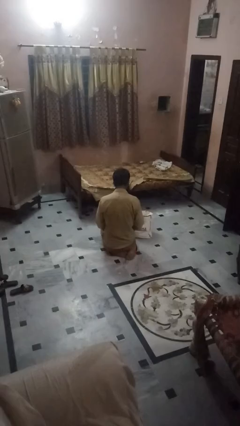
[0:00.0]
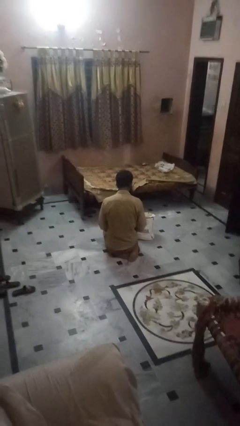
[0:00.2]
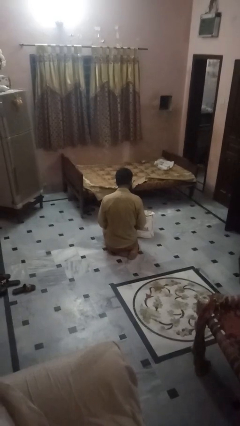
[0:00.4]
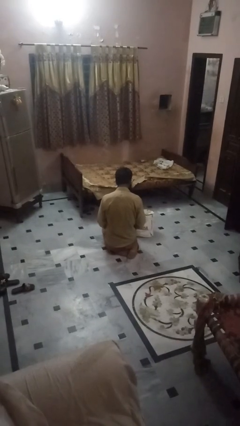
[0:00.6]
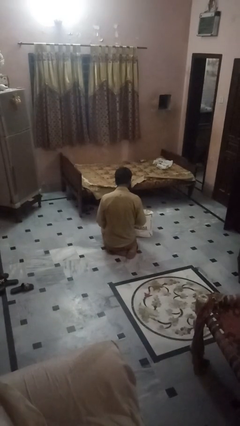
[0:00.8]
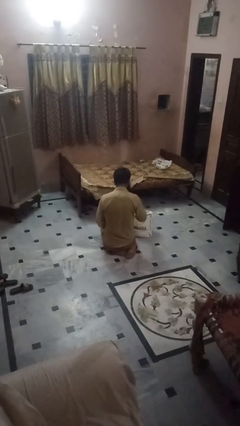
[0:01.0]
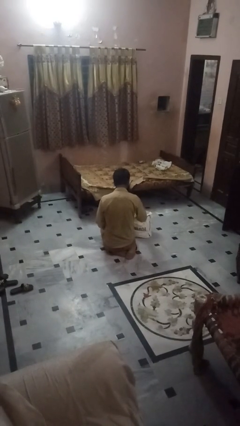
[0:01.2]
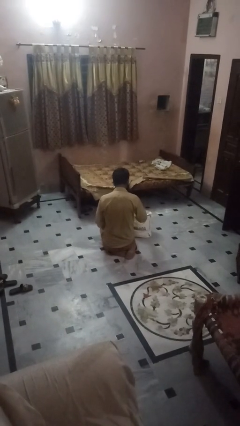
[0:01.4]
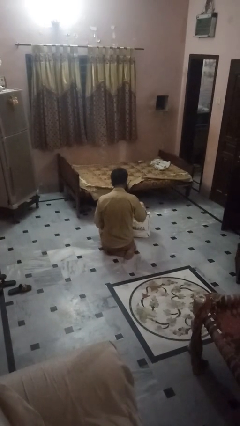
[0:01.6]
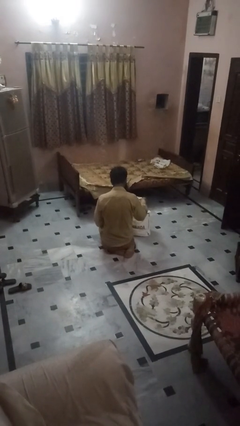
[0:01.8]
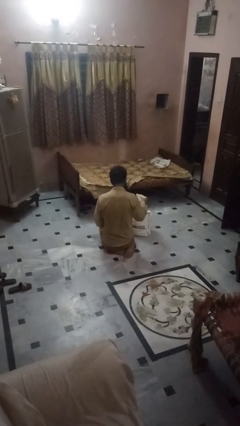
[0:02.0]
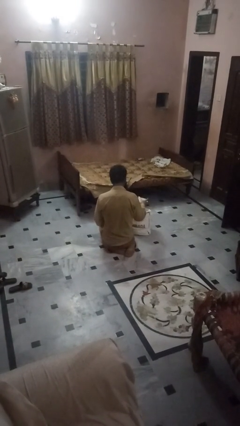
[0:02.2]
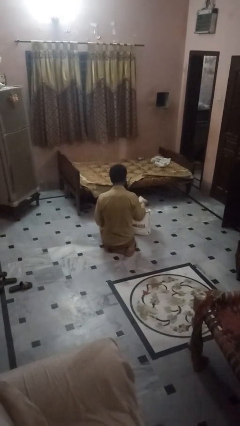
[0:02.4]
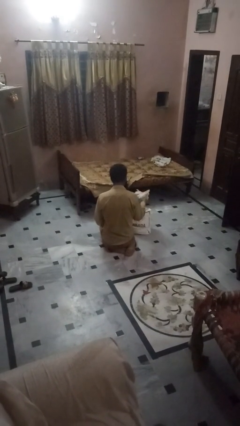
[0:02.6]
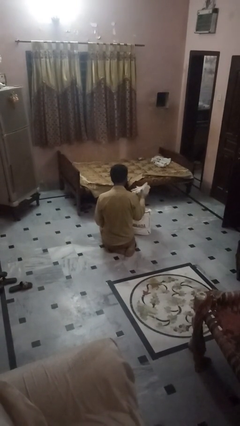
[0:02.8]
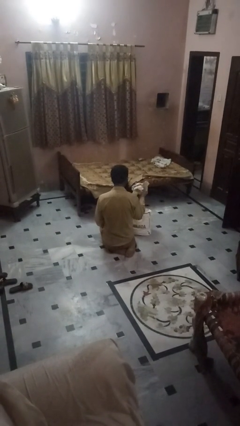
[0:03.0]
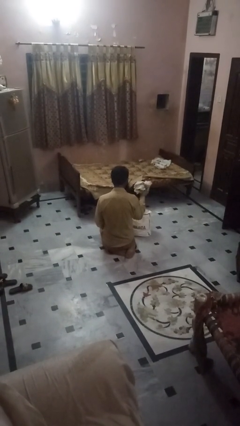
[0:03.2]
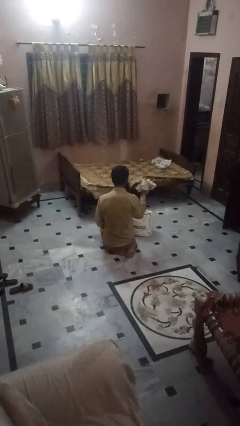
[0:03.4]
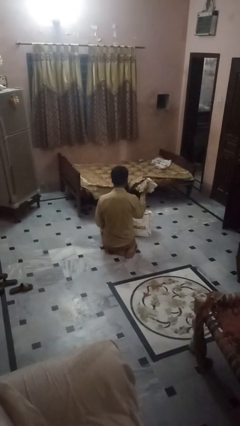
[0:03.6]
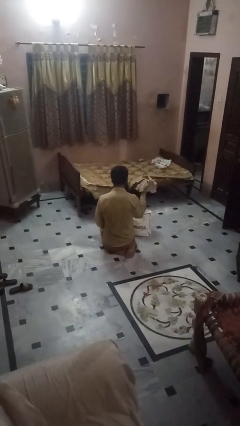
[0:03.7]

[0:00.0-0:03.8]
person takes object from bag

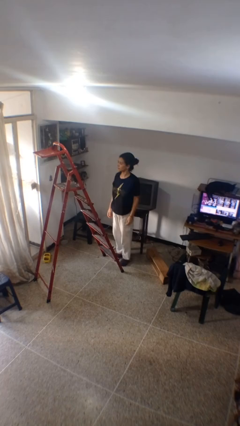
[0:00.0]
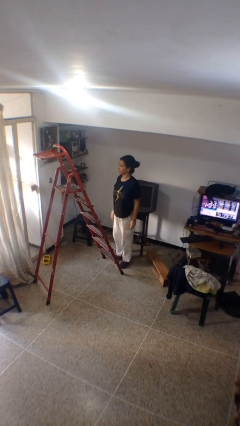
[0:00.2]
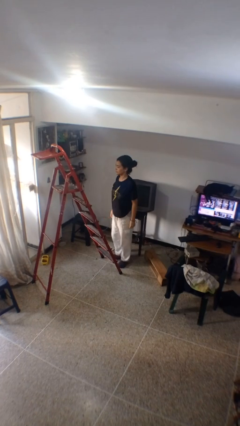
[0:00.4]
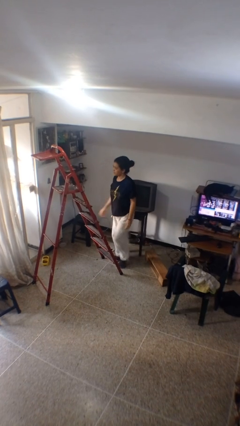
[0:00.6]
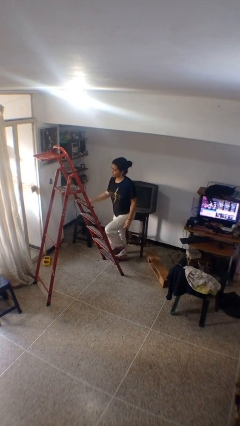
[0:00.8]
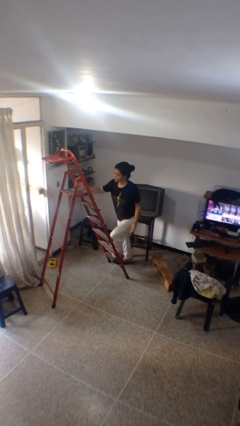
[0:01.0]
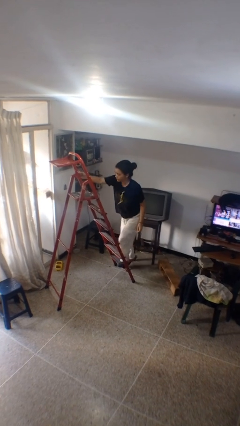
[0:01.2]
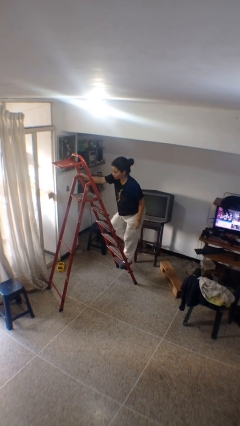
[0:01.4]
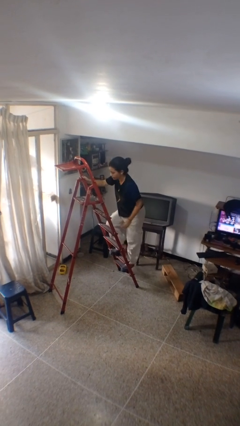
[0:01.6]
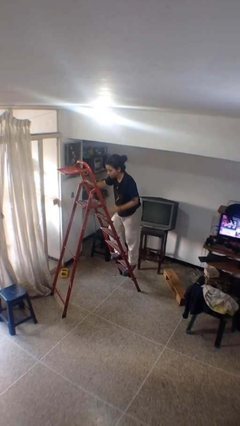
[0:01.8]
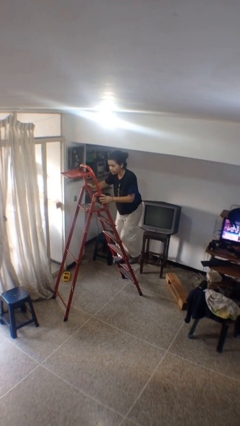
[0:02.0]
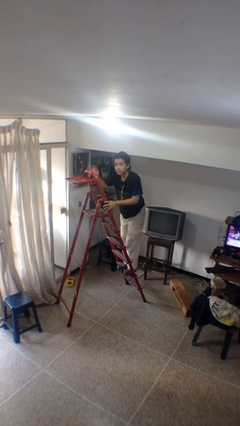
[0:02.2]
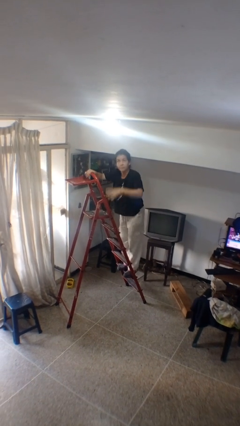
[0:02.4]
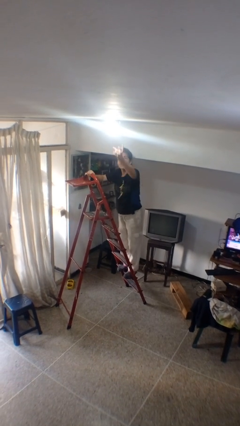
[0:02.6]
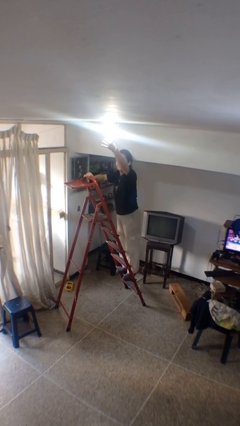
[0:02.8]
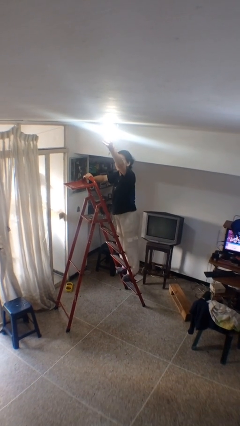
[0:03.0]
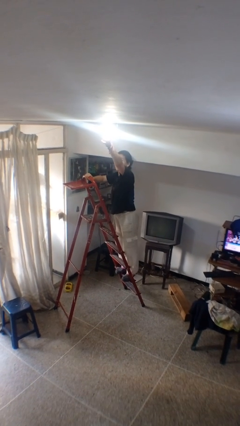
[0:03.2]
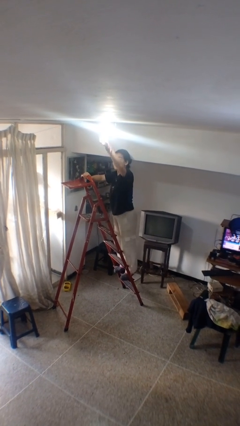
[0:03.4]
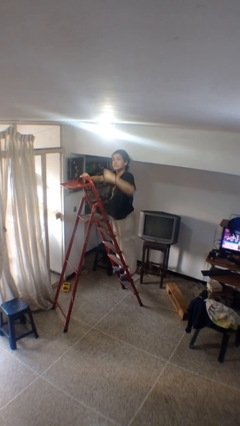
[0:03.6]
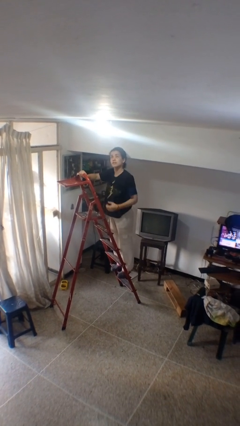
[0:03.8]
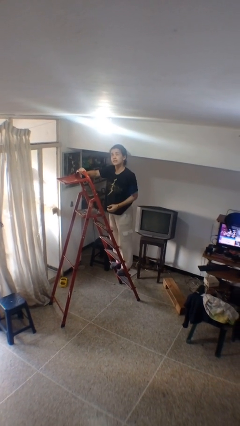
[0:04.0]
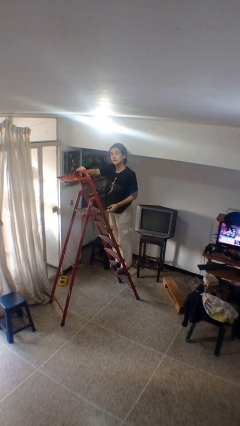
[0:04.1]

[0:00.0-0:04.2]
person climbs up ladder

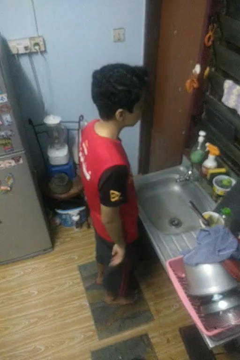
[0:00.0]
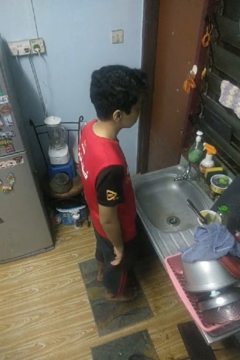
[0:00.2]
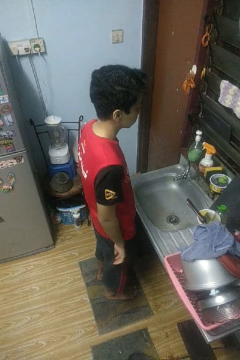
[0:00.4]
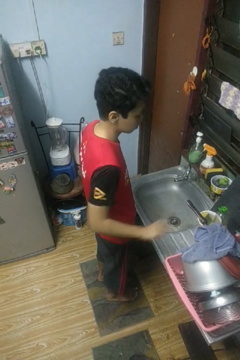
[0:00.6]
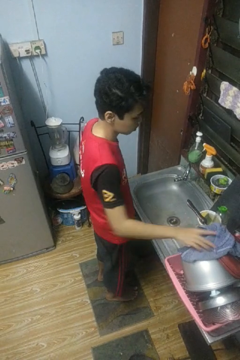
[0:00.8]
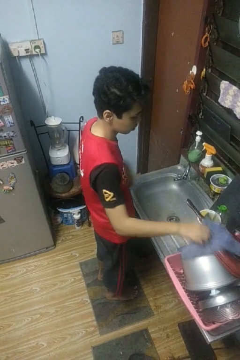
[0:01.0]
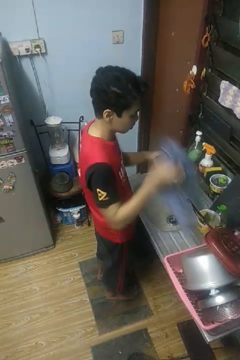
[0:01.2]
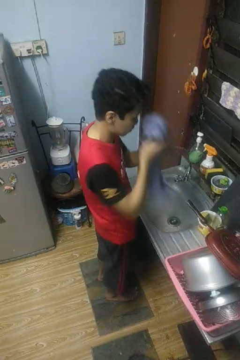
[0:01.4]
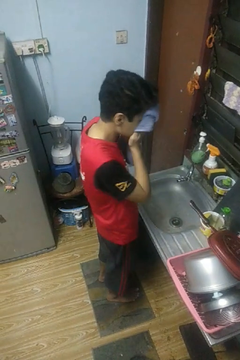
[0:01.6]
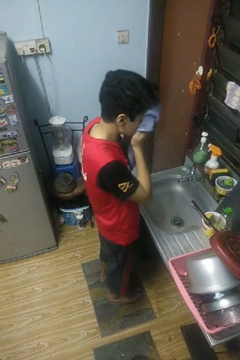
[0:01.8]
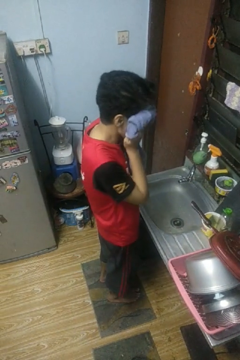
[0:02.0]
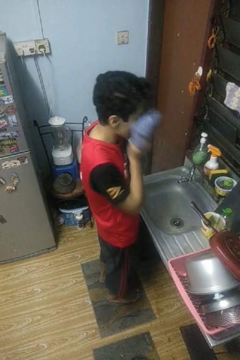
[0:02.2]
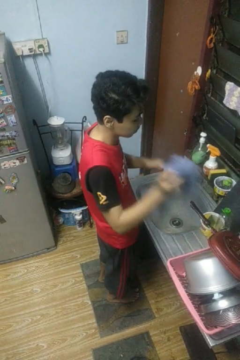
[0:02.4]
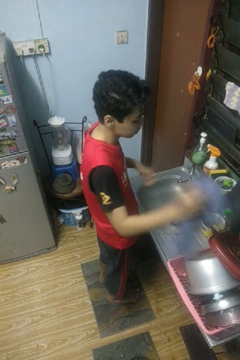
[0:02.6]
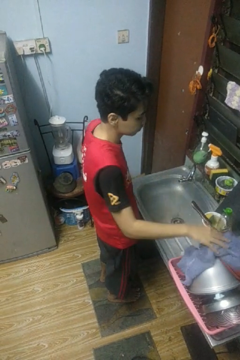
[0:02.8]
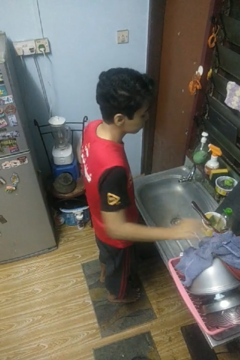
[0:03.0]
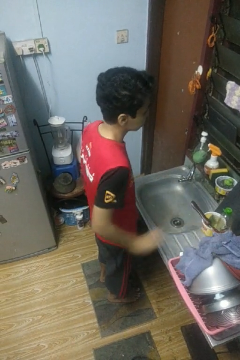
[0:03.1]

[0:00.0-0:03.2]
person dries face with towel

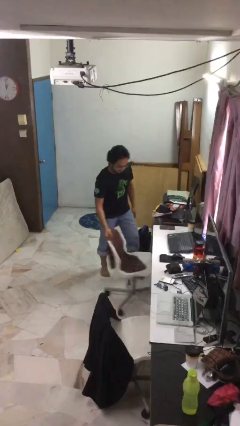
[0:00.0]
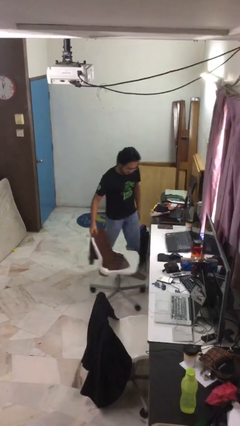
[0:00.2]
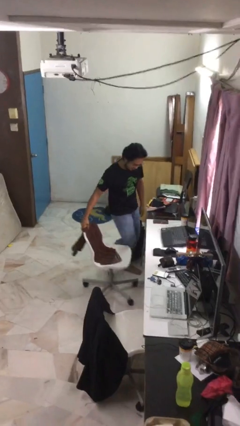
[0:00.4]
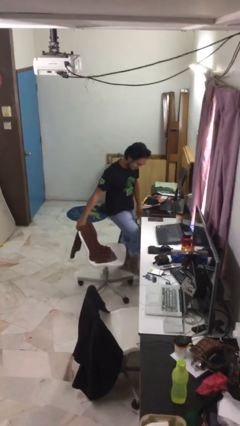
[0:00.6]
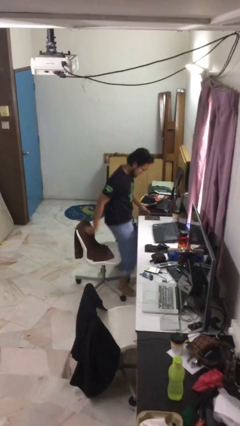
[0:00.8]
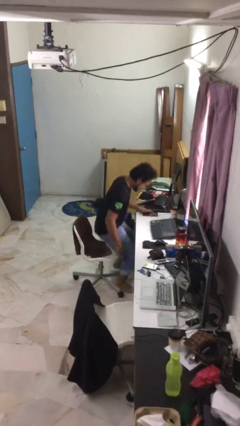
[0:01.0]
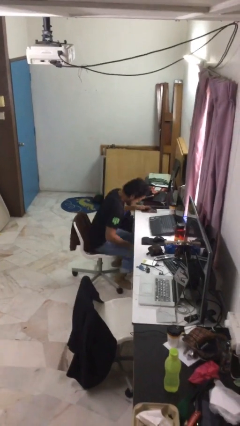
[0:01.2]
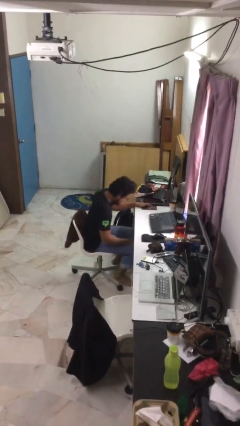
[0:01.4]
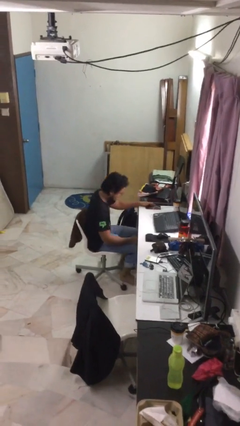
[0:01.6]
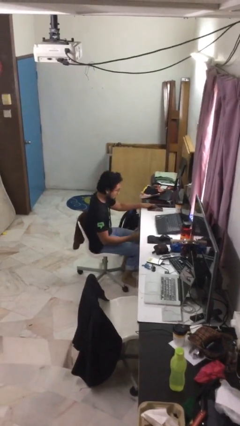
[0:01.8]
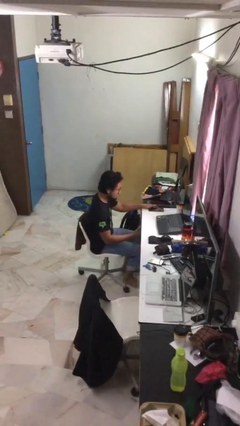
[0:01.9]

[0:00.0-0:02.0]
person sits down

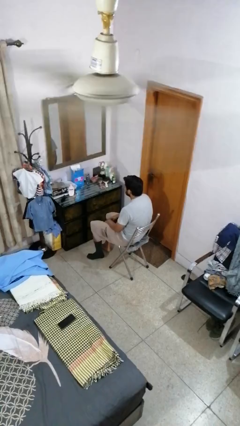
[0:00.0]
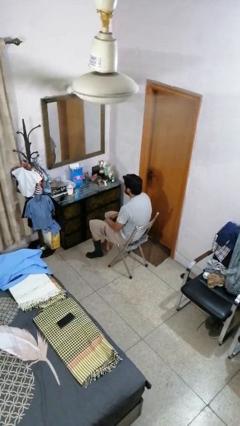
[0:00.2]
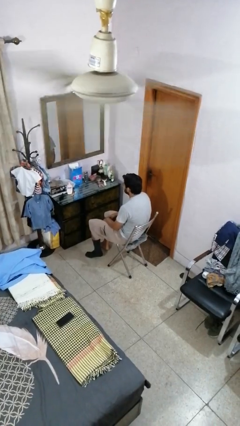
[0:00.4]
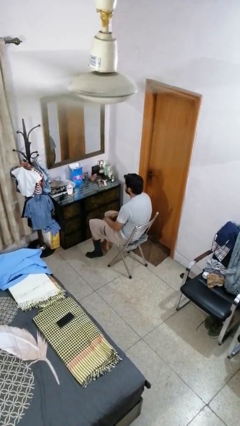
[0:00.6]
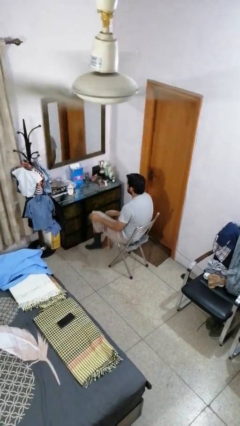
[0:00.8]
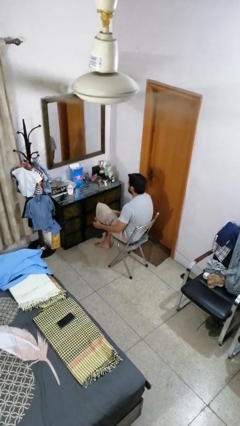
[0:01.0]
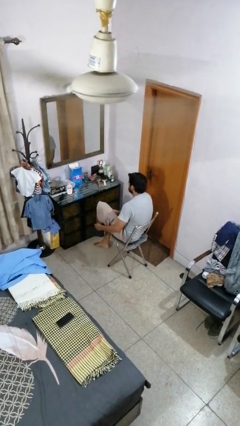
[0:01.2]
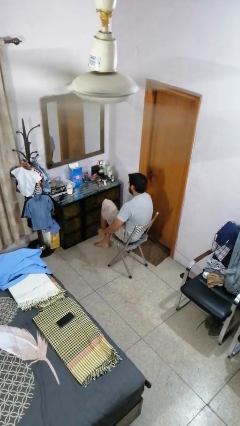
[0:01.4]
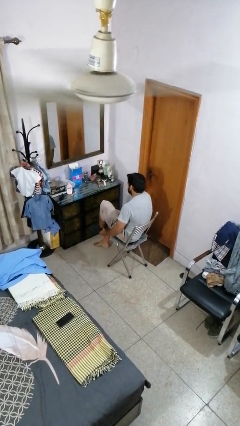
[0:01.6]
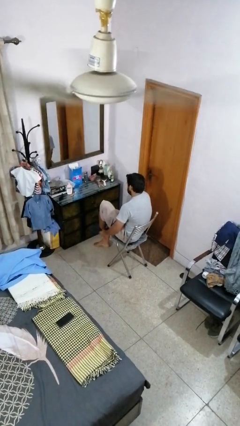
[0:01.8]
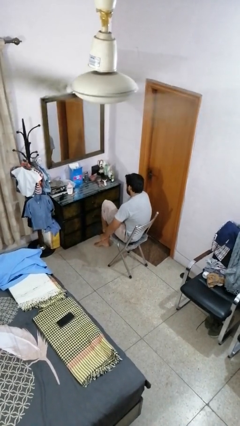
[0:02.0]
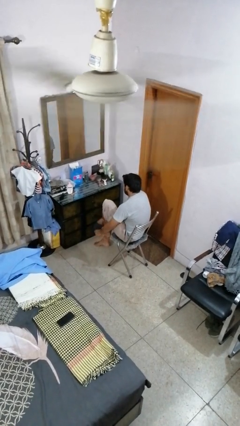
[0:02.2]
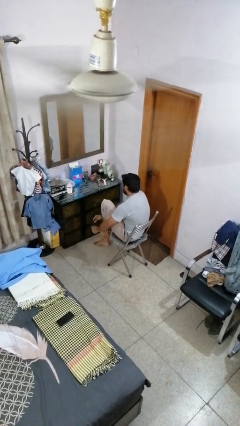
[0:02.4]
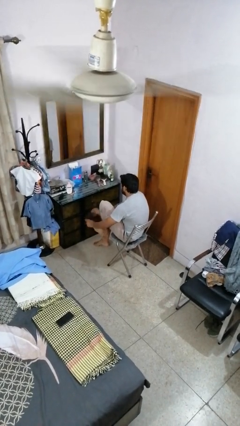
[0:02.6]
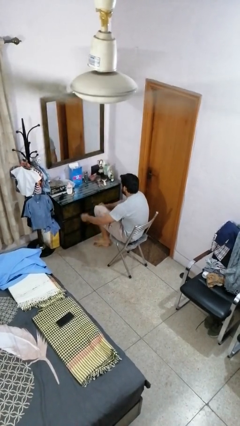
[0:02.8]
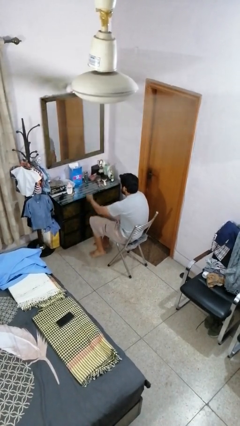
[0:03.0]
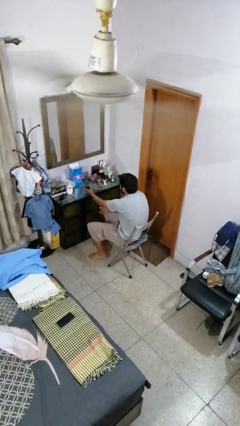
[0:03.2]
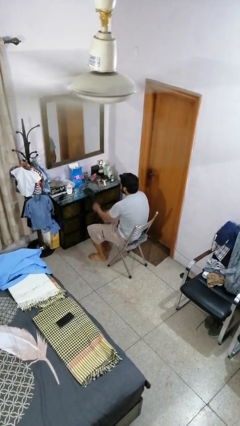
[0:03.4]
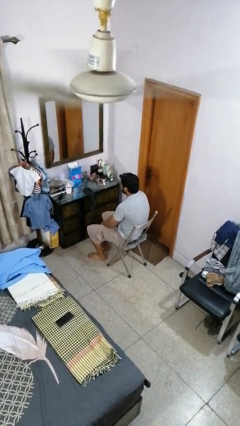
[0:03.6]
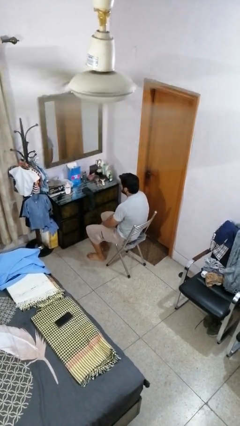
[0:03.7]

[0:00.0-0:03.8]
person takes off socks

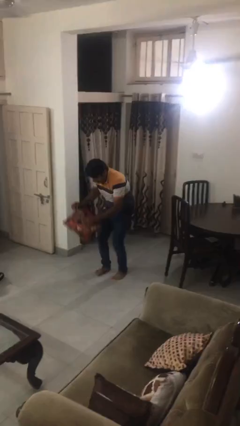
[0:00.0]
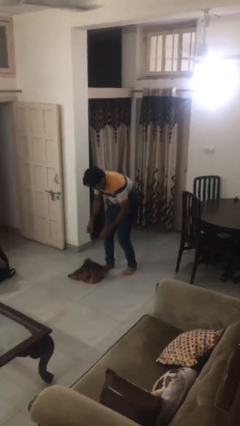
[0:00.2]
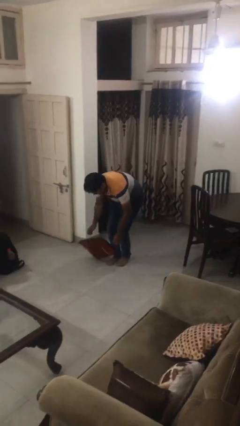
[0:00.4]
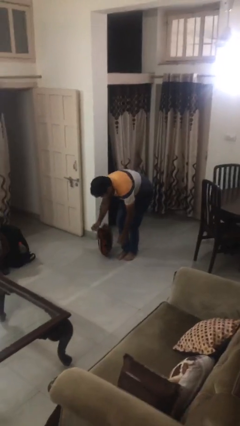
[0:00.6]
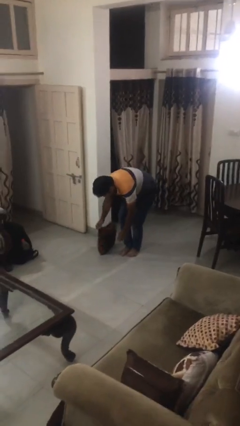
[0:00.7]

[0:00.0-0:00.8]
person drops object

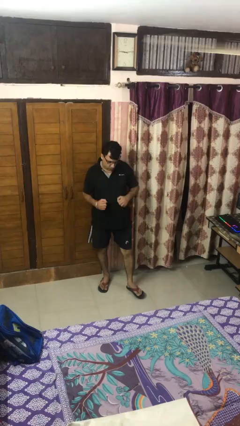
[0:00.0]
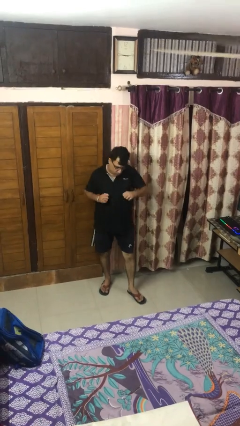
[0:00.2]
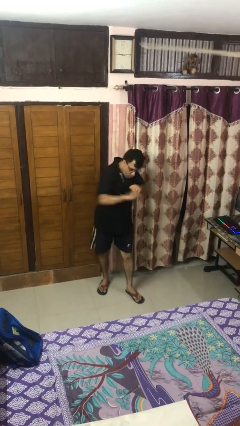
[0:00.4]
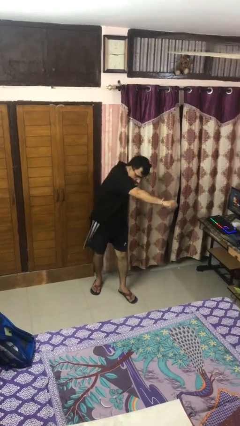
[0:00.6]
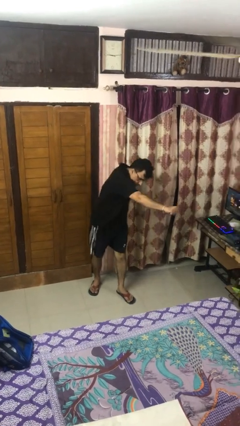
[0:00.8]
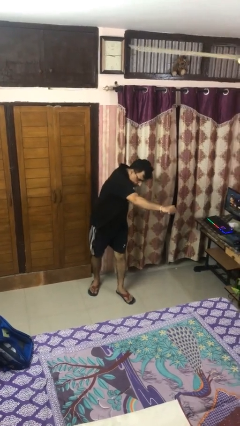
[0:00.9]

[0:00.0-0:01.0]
person punches
